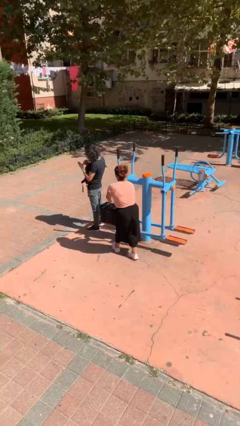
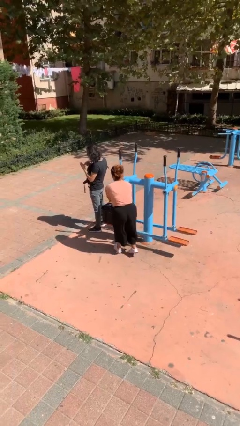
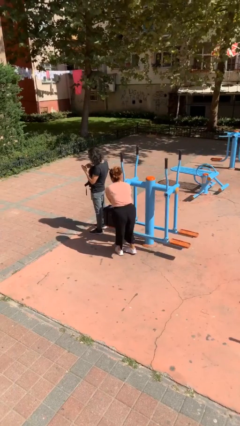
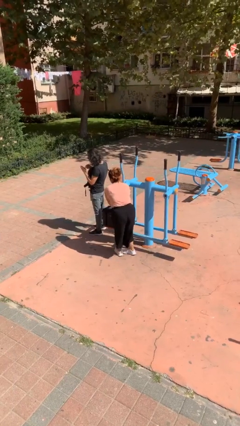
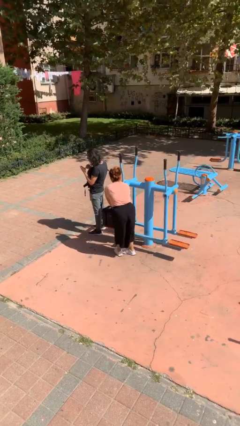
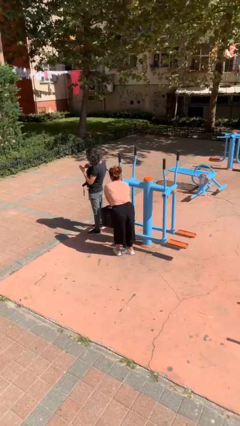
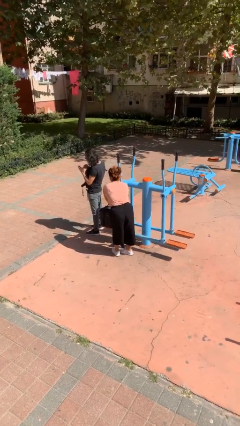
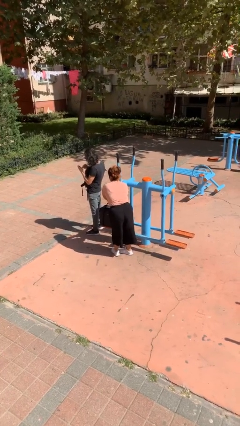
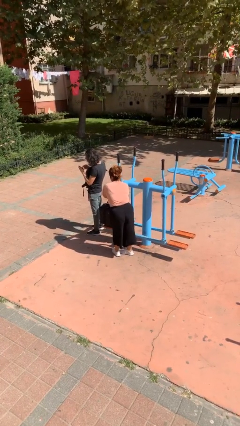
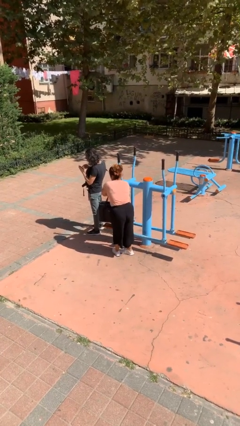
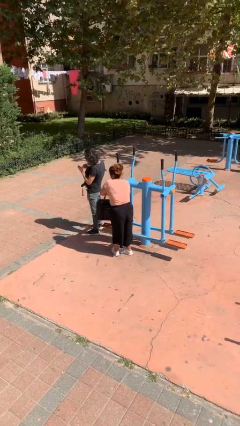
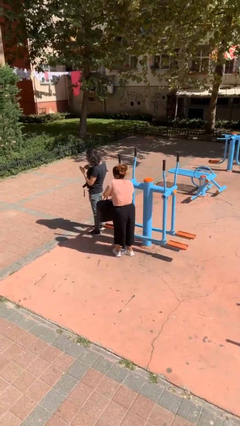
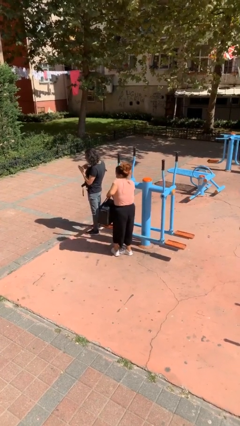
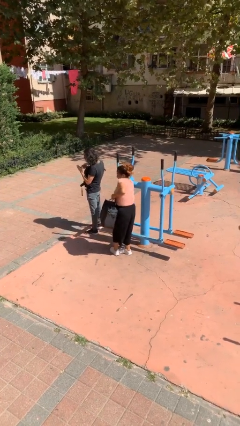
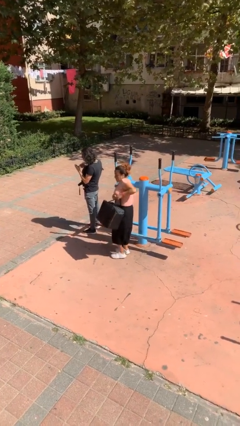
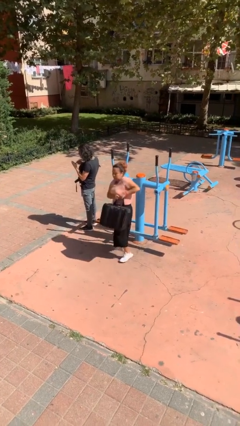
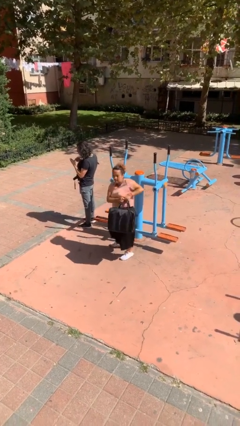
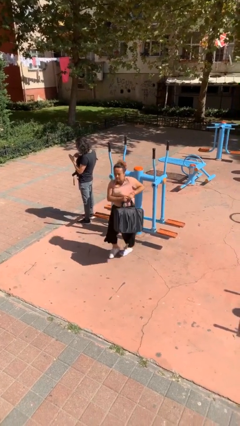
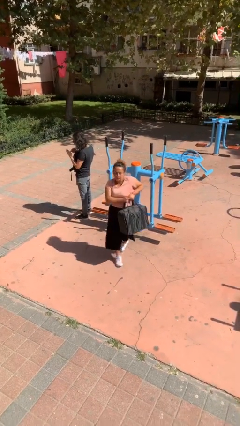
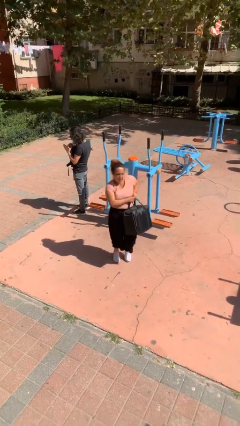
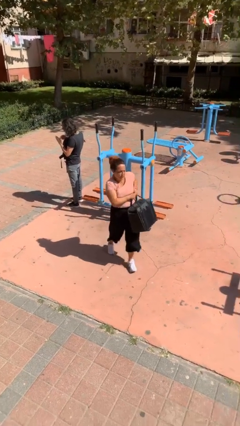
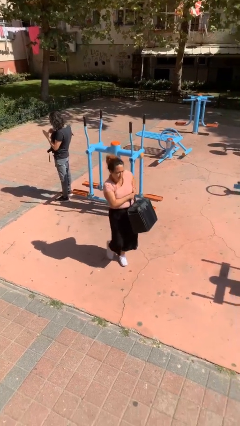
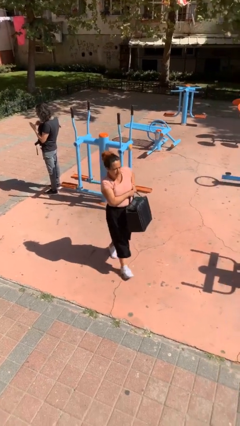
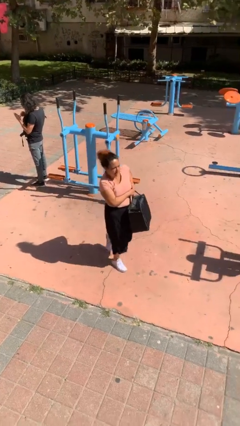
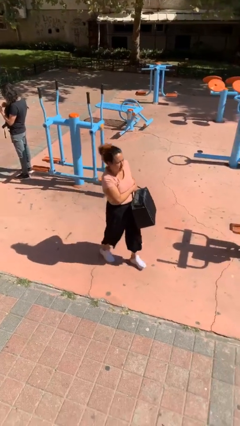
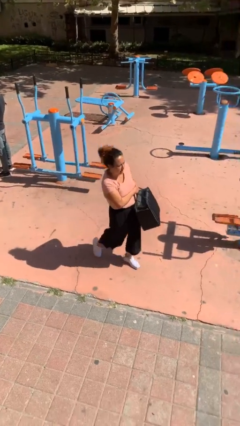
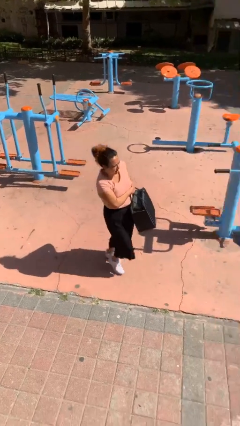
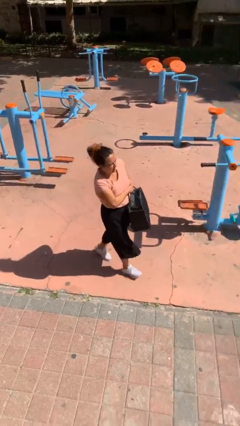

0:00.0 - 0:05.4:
person steals object from person

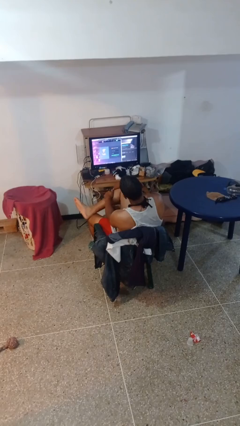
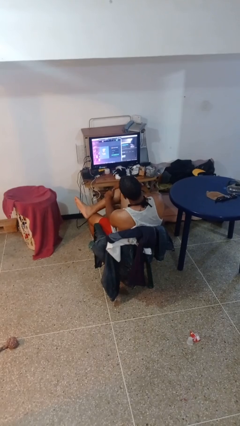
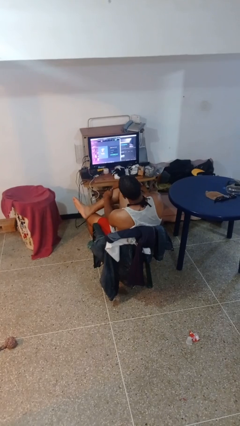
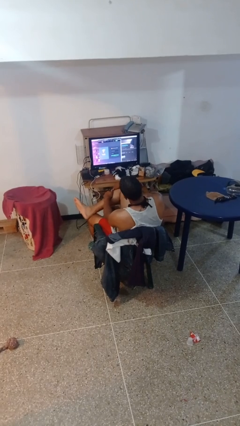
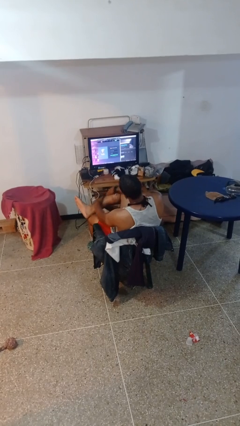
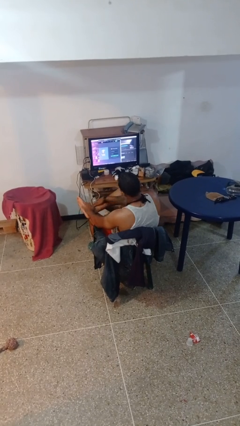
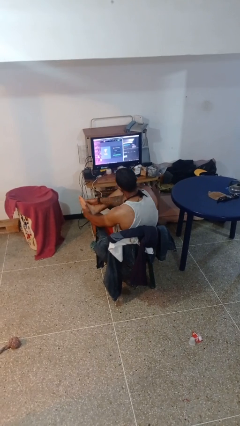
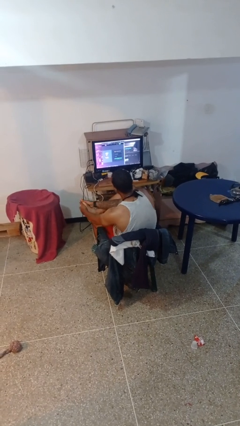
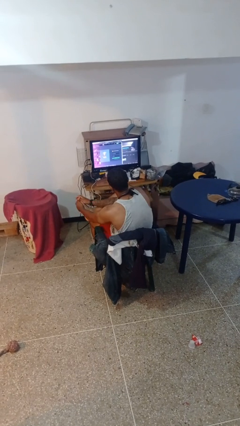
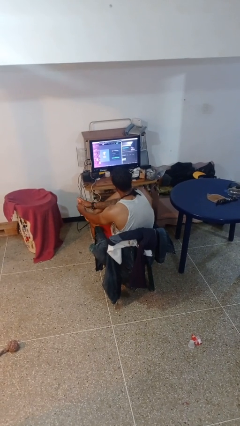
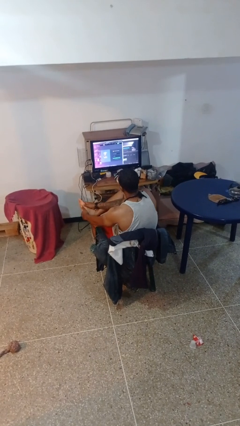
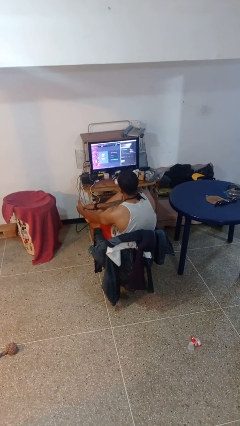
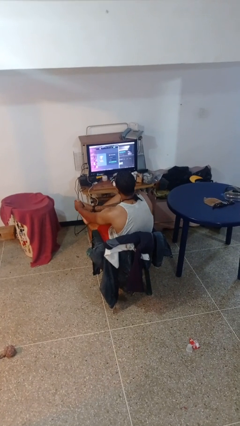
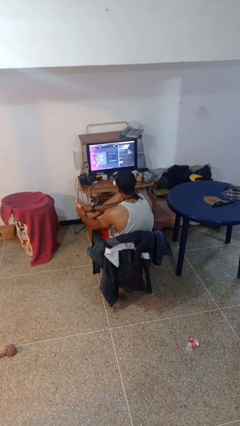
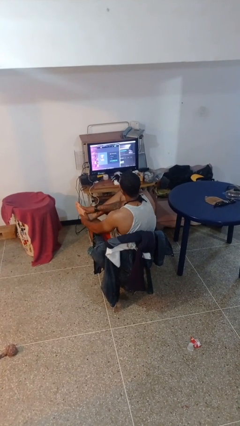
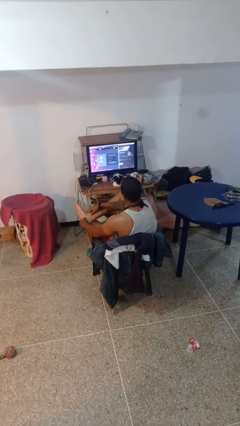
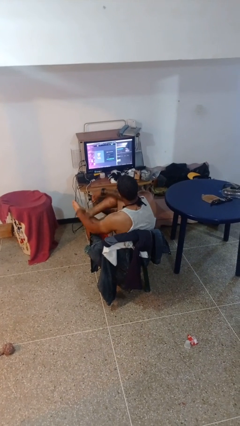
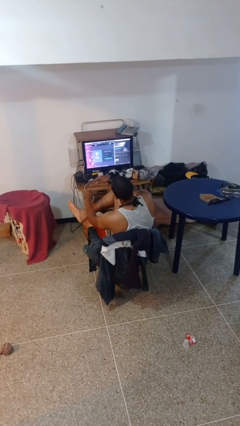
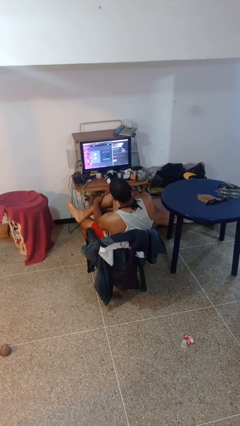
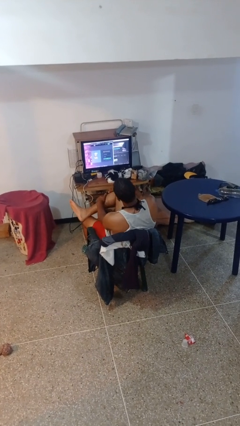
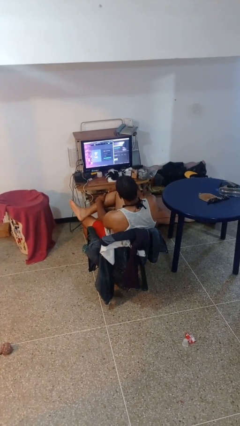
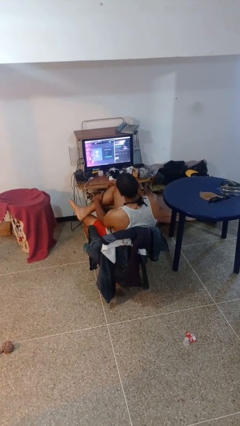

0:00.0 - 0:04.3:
person rubs foot

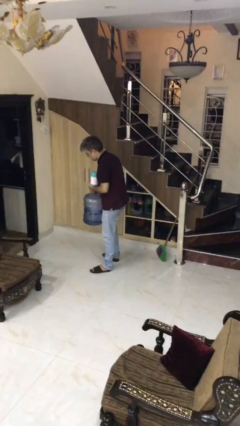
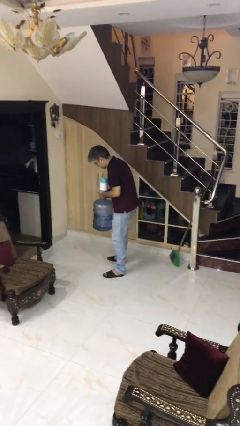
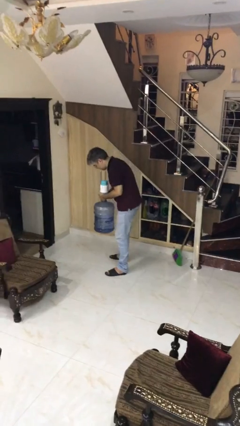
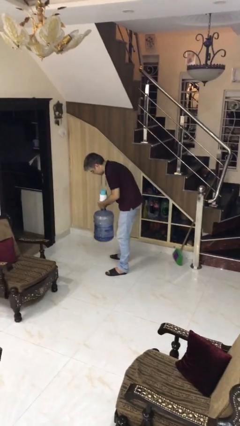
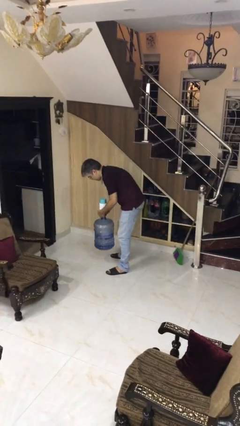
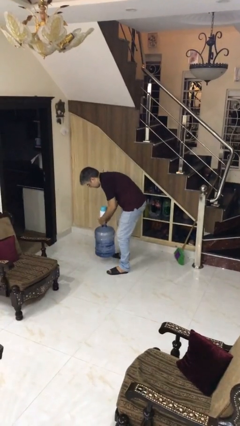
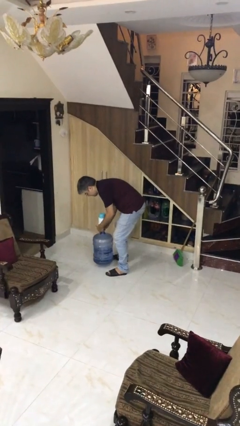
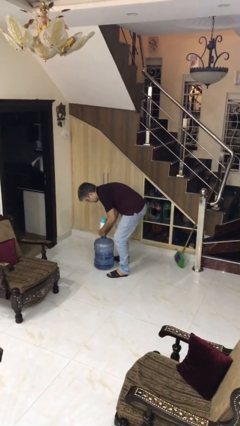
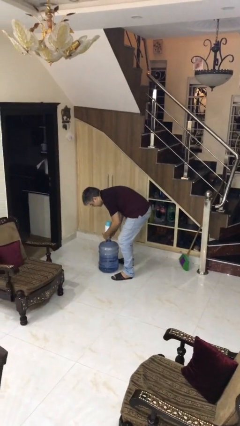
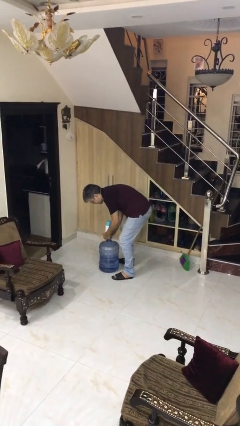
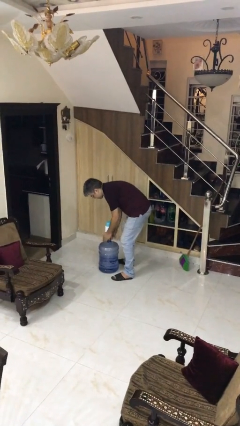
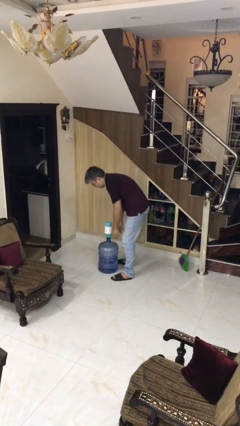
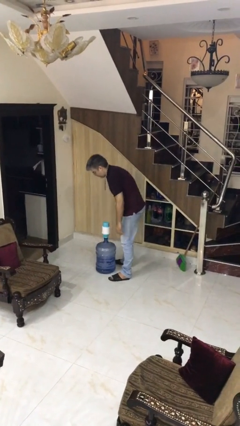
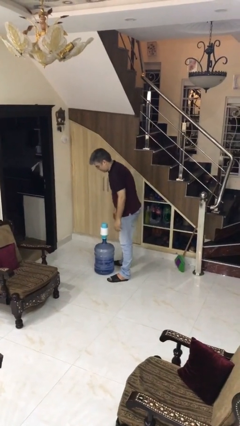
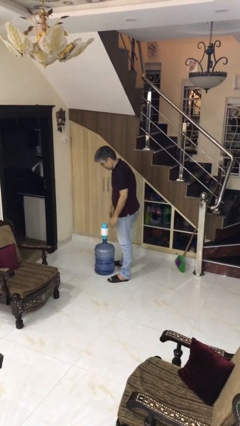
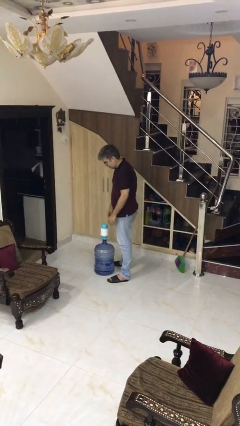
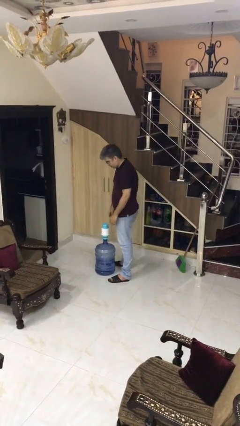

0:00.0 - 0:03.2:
person puts down object on floor

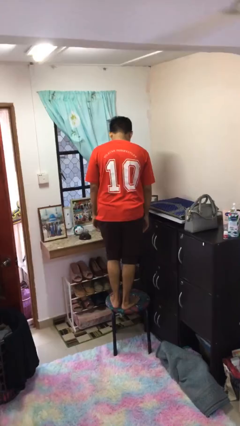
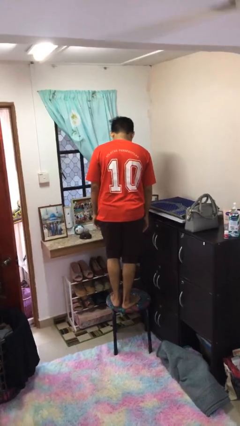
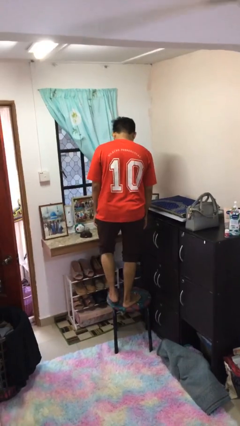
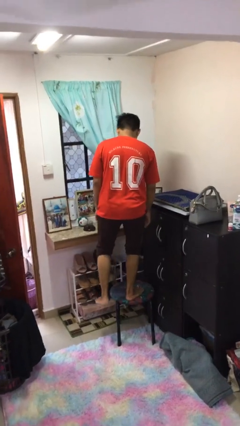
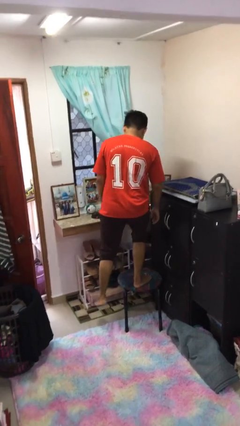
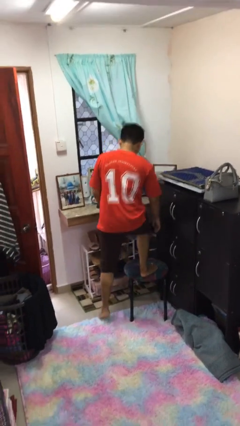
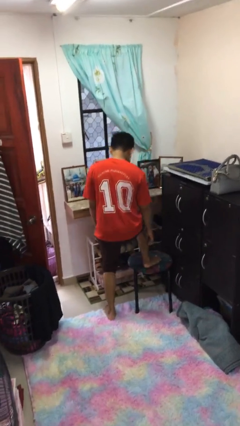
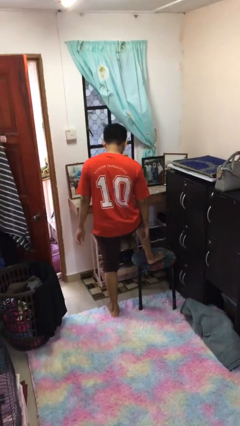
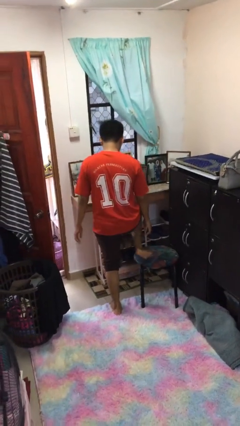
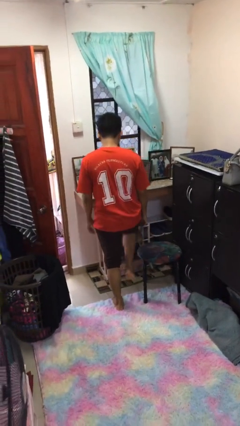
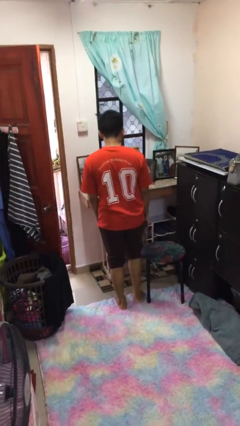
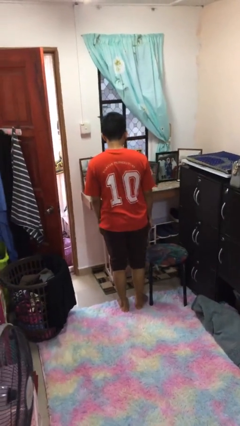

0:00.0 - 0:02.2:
person climbs off chair

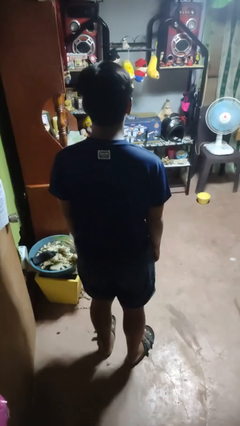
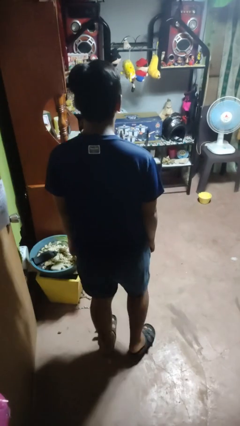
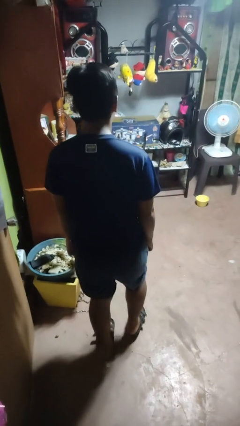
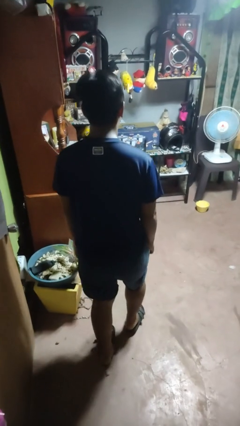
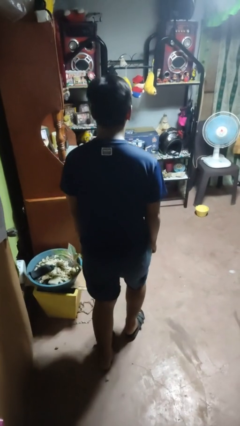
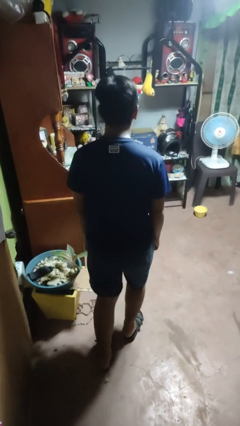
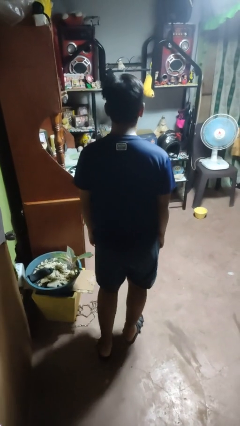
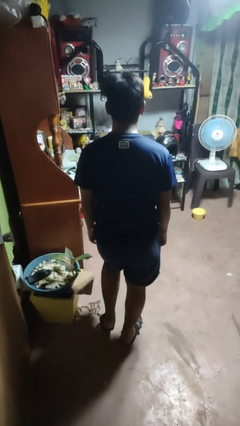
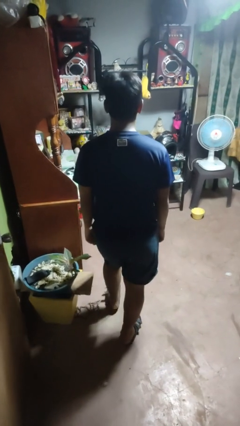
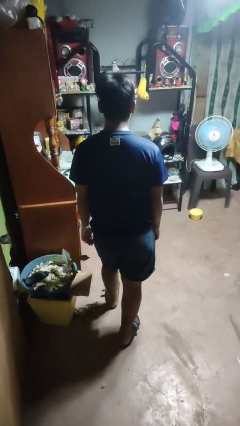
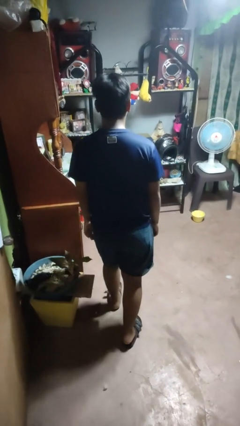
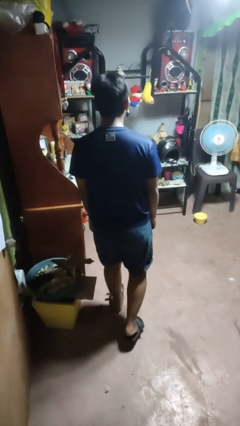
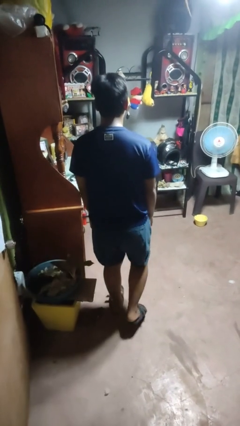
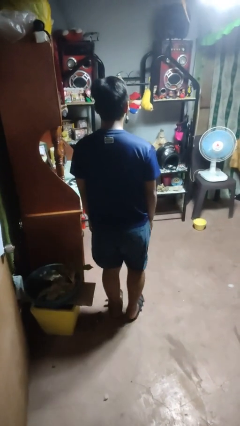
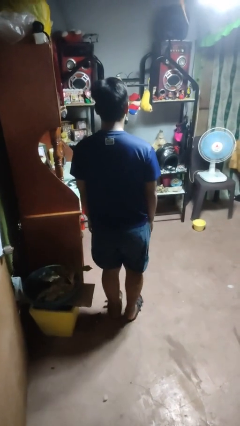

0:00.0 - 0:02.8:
person walks tiptoe
